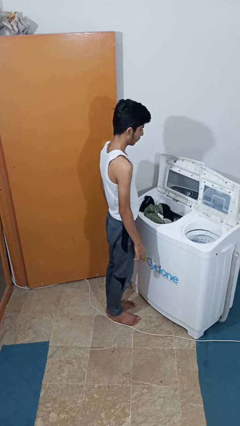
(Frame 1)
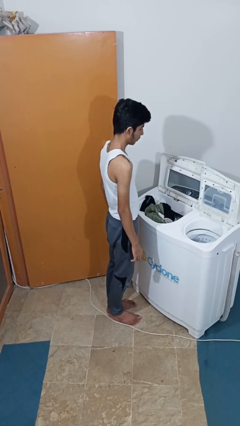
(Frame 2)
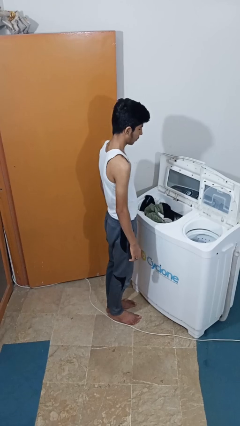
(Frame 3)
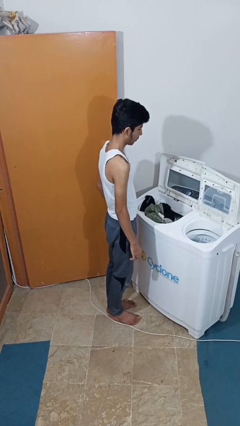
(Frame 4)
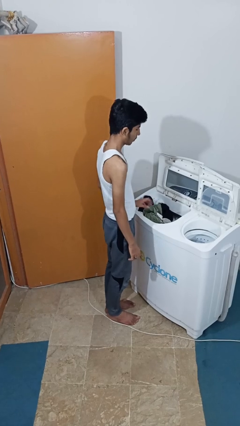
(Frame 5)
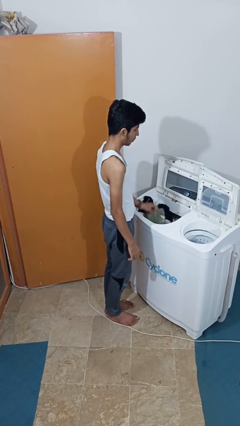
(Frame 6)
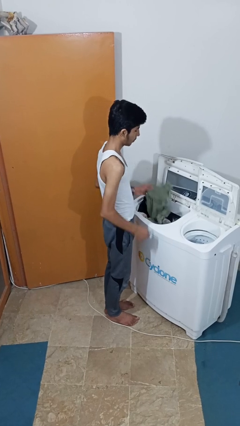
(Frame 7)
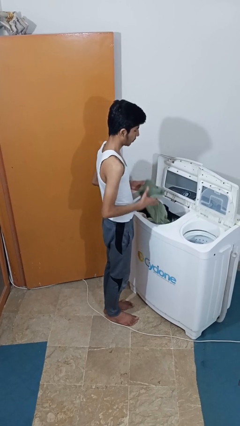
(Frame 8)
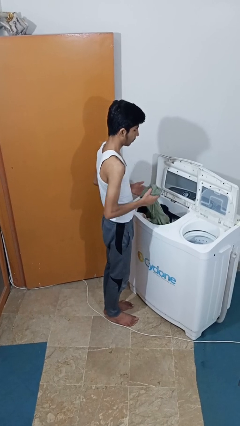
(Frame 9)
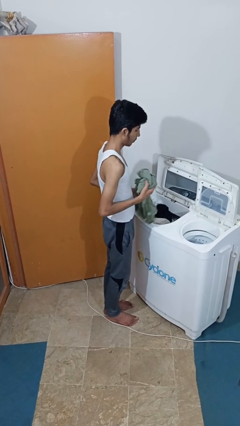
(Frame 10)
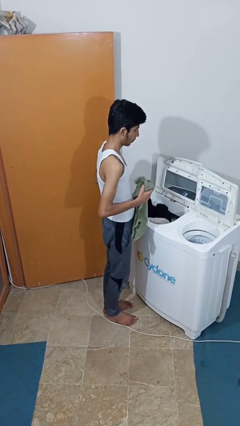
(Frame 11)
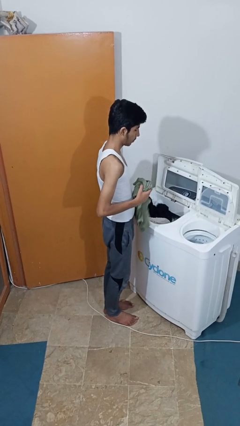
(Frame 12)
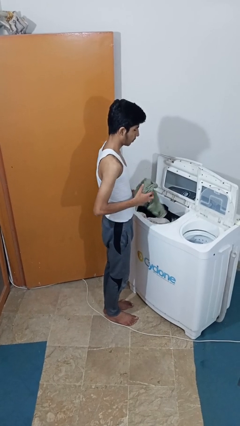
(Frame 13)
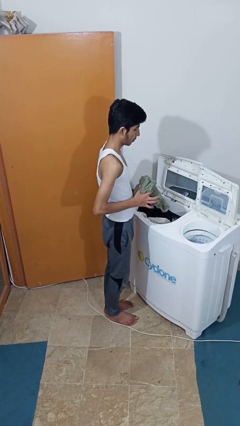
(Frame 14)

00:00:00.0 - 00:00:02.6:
person unloads clotheswasher

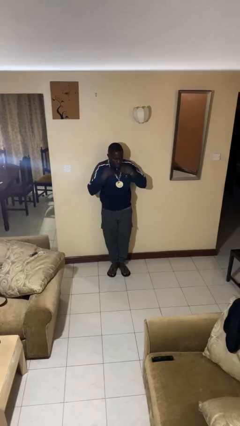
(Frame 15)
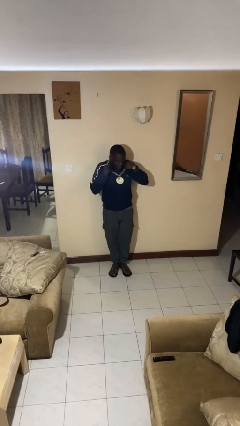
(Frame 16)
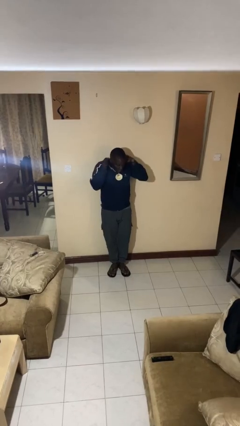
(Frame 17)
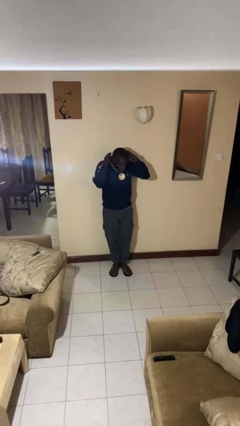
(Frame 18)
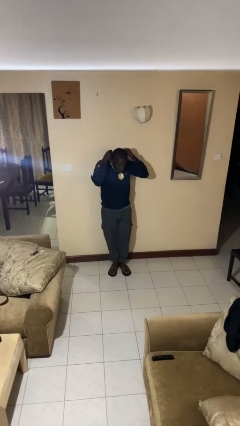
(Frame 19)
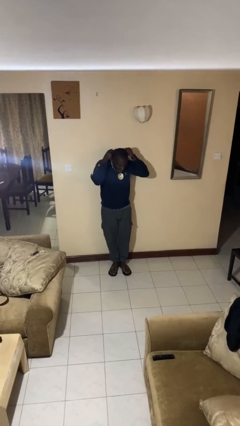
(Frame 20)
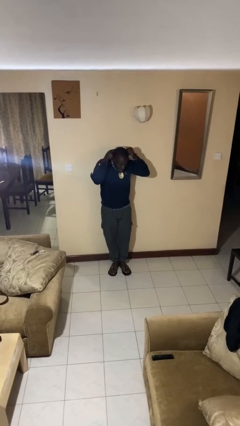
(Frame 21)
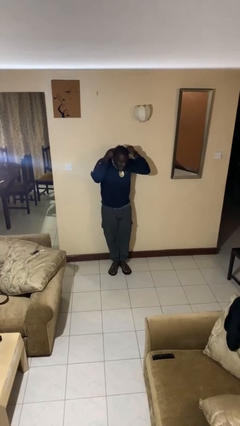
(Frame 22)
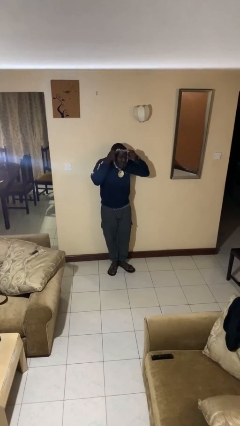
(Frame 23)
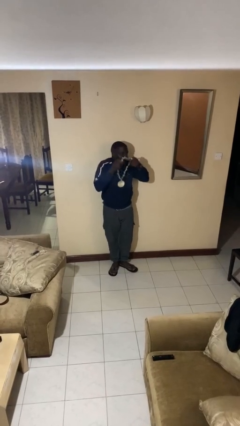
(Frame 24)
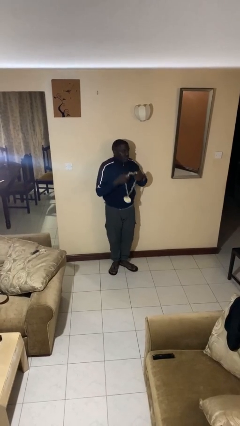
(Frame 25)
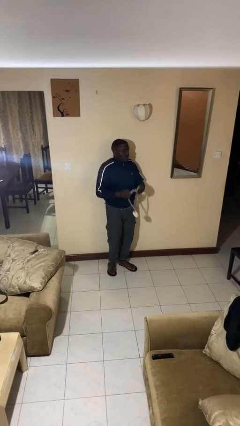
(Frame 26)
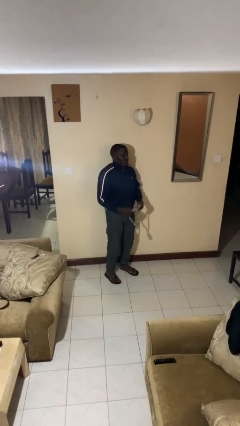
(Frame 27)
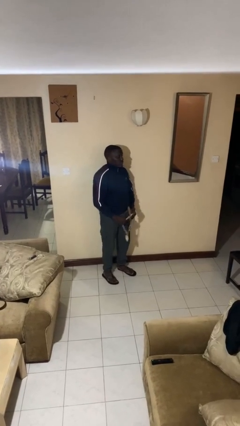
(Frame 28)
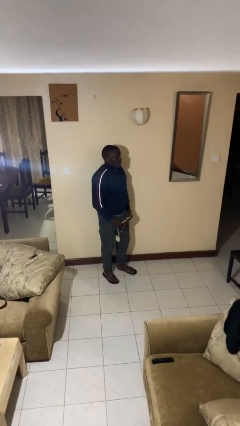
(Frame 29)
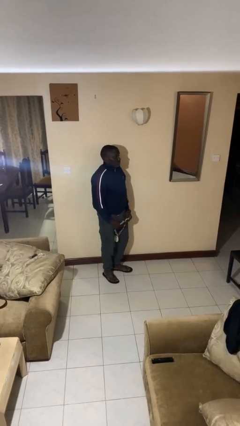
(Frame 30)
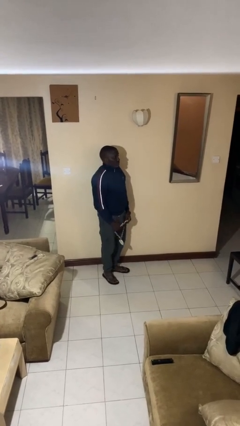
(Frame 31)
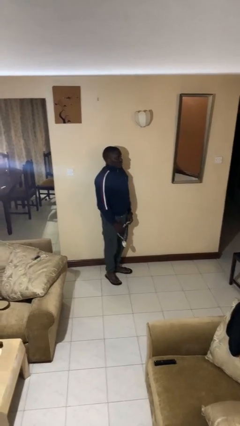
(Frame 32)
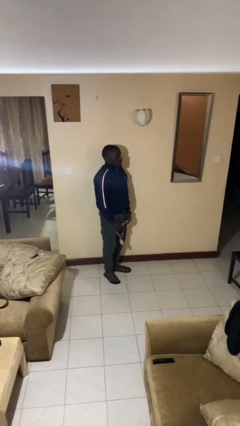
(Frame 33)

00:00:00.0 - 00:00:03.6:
person takes off necklace

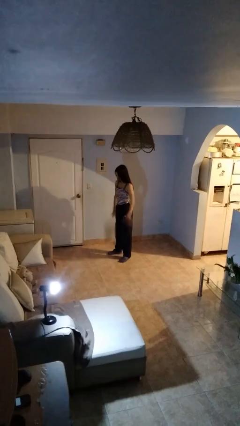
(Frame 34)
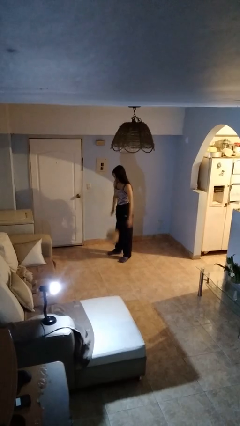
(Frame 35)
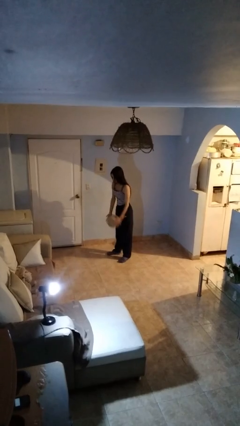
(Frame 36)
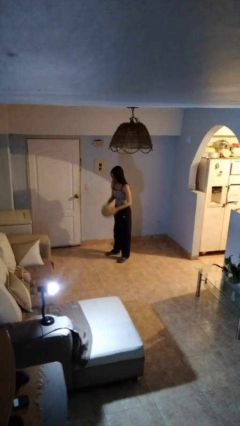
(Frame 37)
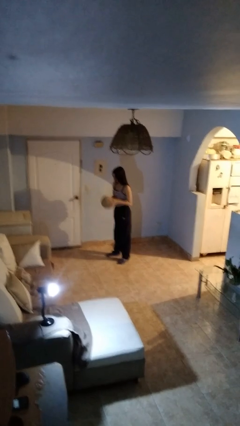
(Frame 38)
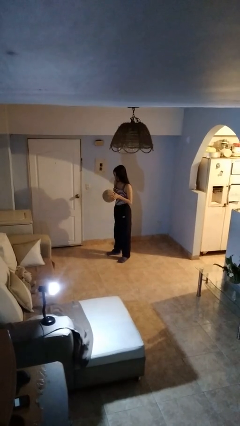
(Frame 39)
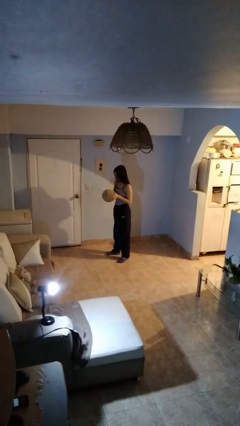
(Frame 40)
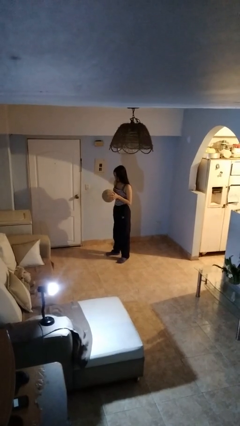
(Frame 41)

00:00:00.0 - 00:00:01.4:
person bounces ball on floor

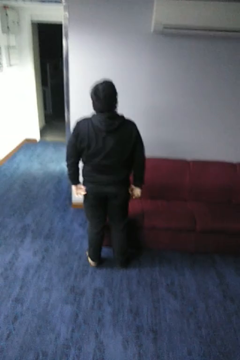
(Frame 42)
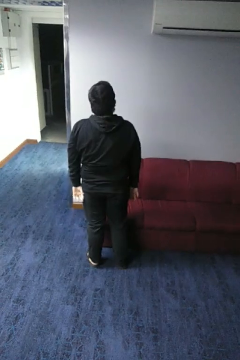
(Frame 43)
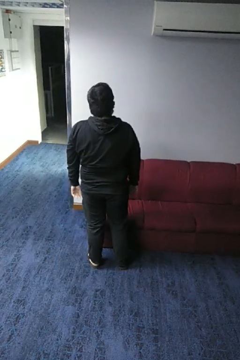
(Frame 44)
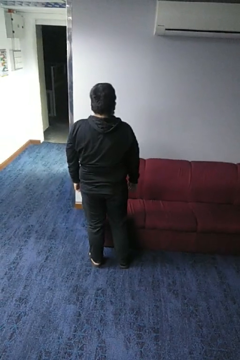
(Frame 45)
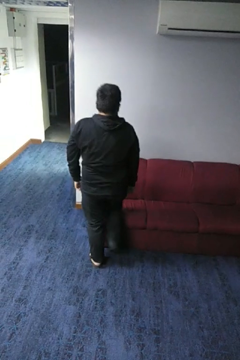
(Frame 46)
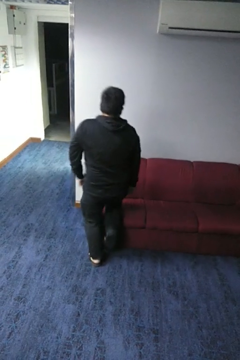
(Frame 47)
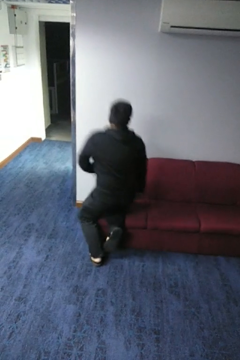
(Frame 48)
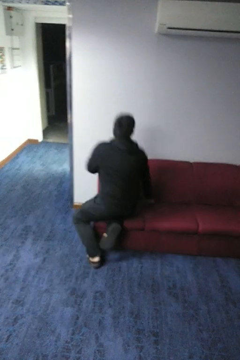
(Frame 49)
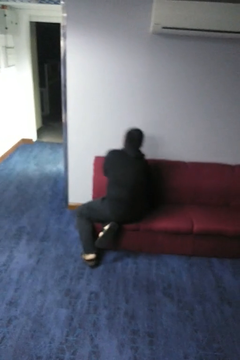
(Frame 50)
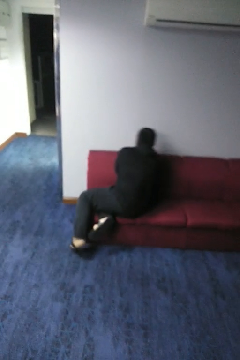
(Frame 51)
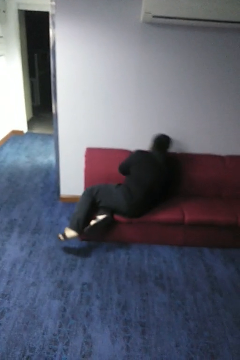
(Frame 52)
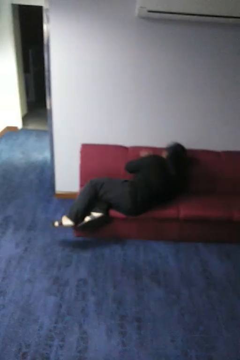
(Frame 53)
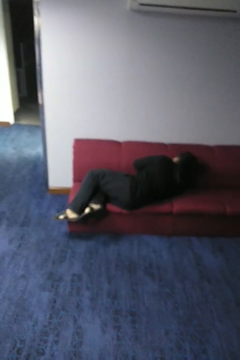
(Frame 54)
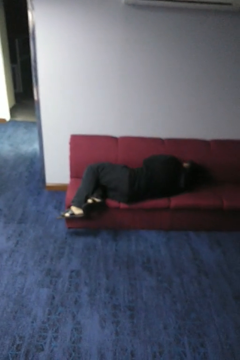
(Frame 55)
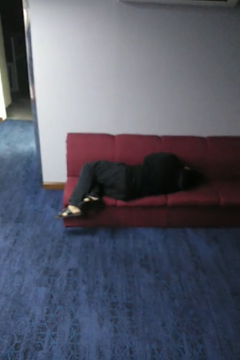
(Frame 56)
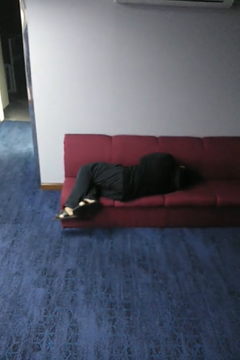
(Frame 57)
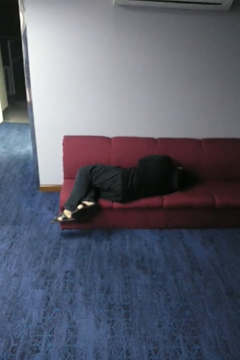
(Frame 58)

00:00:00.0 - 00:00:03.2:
person lies down on couch

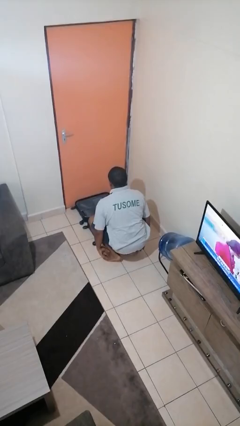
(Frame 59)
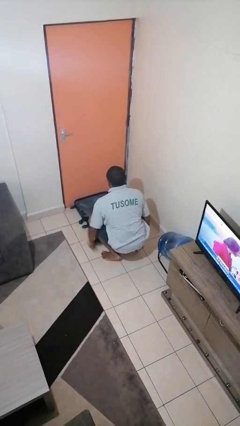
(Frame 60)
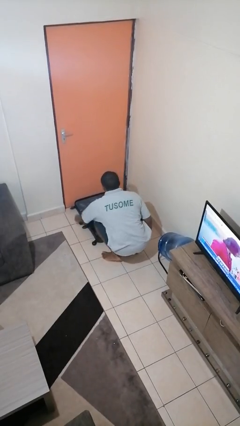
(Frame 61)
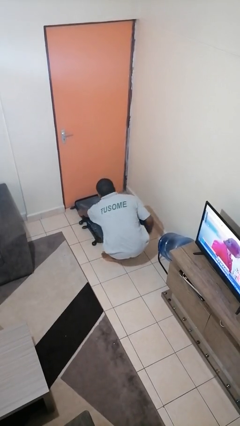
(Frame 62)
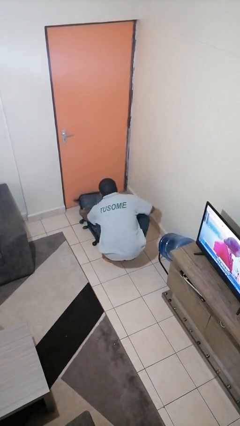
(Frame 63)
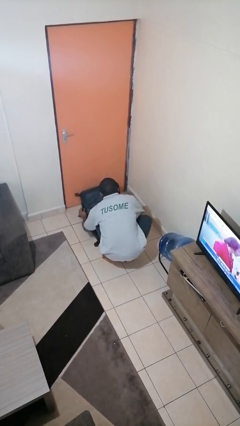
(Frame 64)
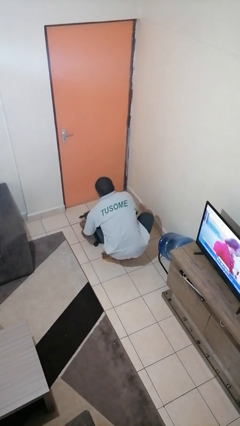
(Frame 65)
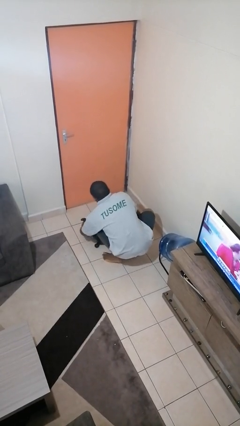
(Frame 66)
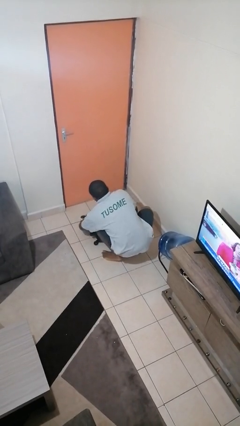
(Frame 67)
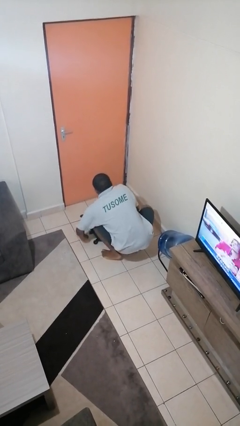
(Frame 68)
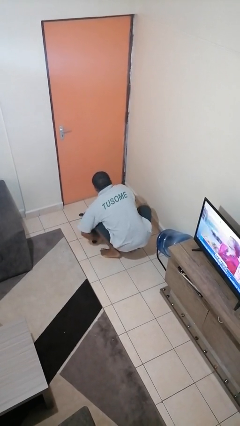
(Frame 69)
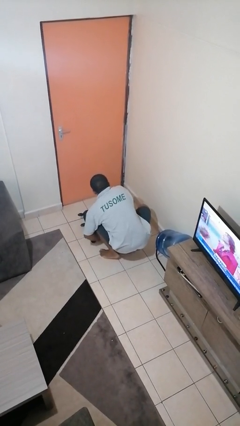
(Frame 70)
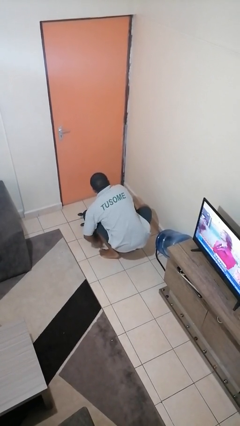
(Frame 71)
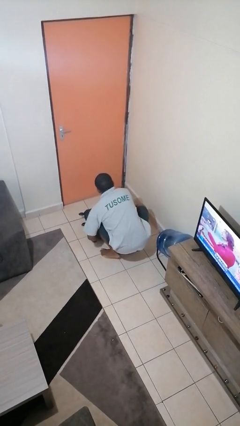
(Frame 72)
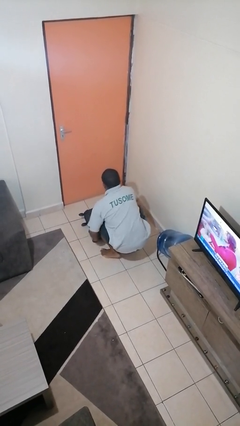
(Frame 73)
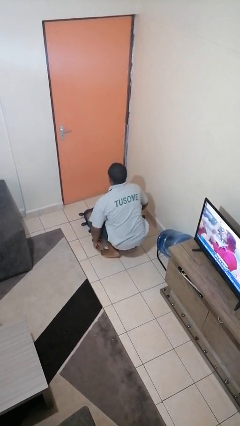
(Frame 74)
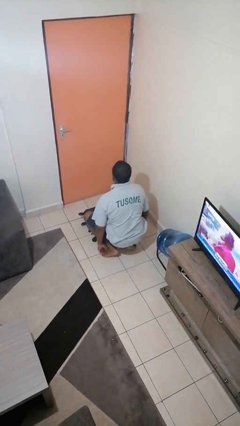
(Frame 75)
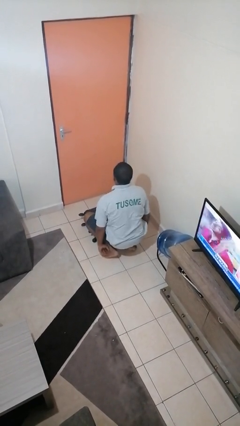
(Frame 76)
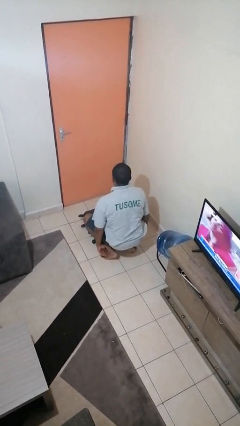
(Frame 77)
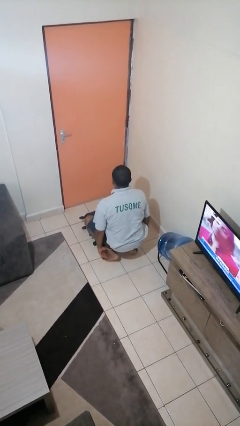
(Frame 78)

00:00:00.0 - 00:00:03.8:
person closes suitcase

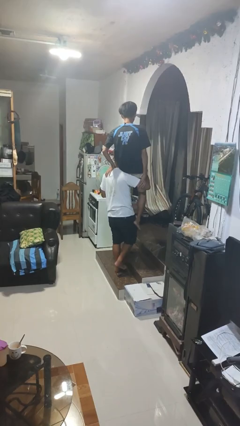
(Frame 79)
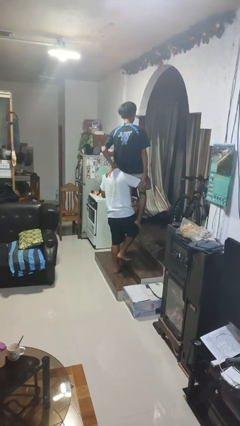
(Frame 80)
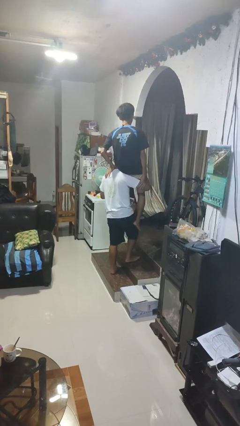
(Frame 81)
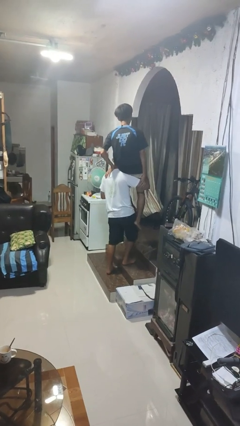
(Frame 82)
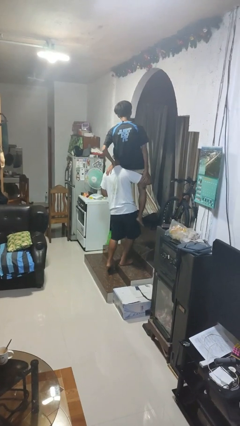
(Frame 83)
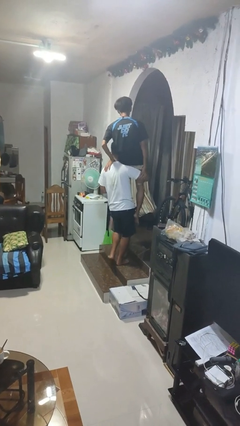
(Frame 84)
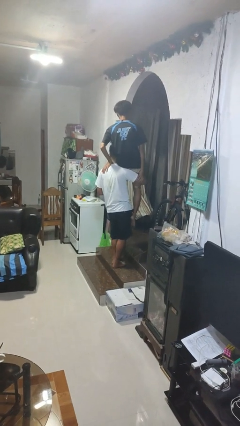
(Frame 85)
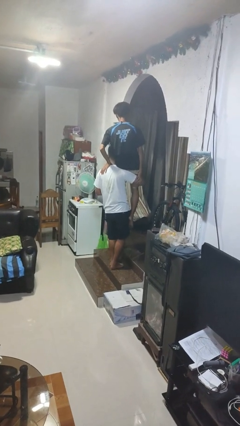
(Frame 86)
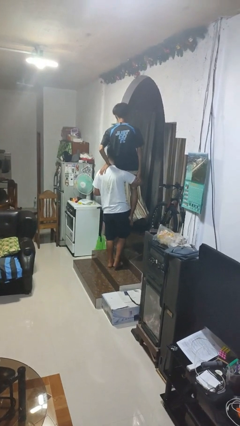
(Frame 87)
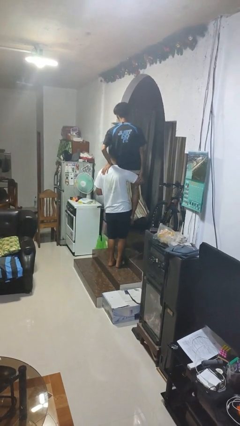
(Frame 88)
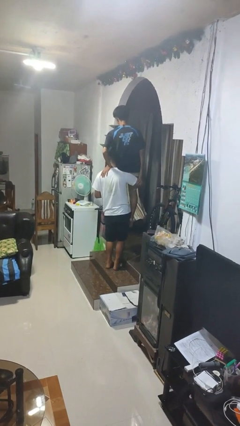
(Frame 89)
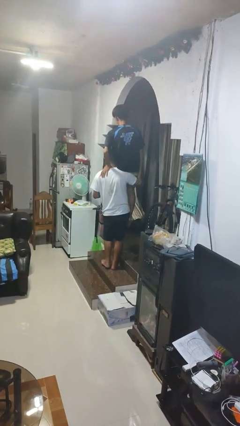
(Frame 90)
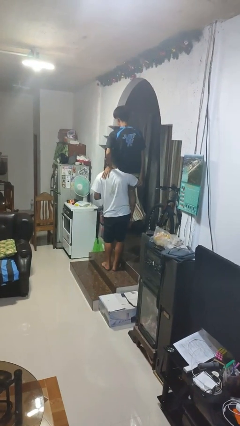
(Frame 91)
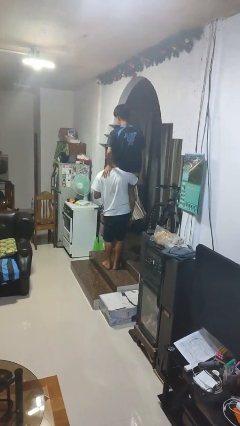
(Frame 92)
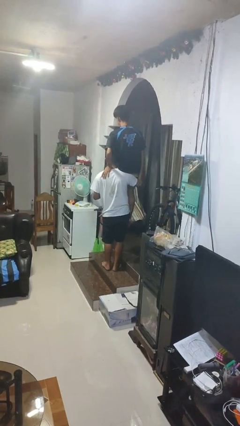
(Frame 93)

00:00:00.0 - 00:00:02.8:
person carries person on shoulders
